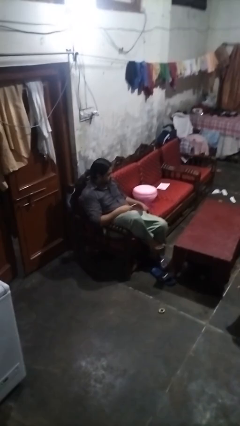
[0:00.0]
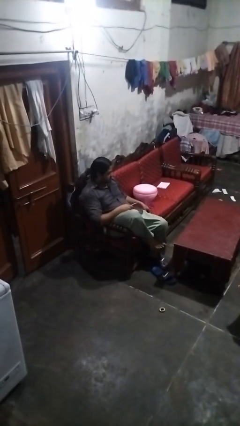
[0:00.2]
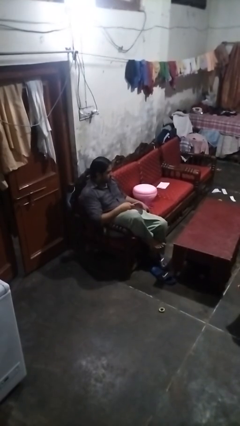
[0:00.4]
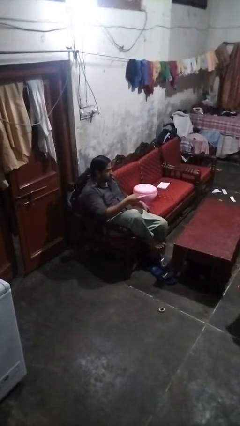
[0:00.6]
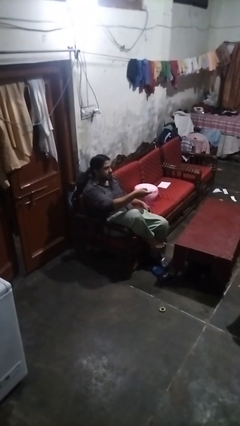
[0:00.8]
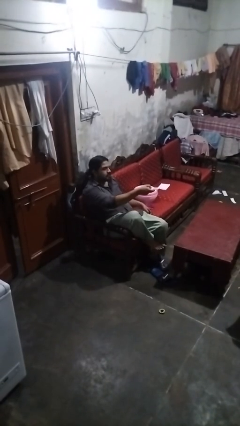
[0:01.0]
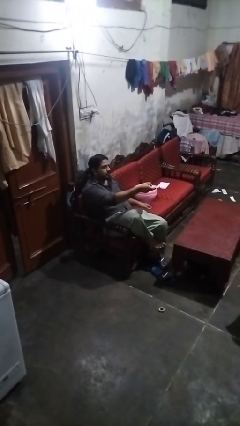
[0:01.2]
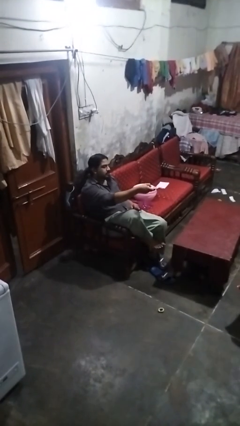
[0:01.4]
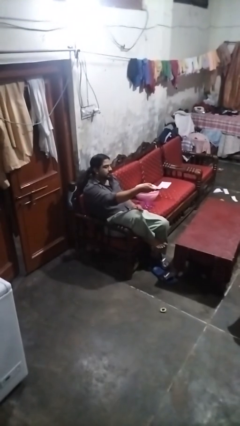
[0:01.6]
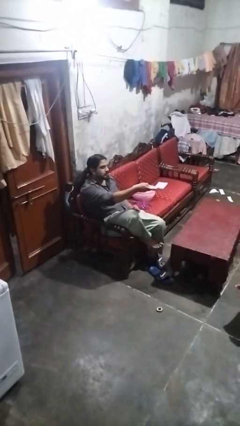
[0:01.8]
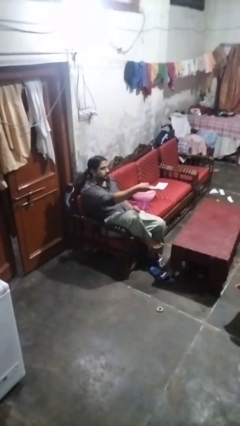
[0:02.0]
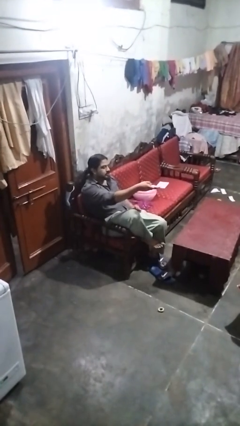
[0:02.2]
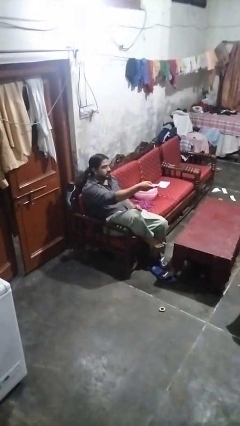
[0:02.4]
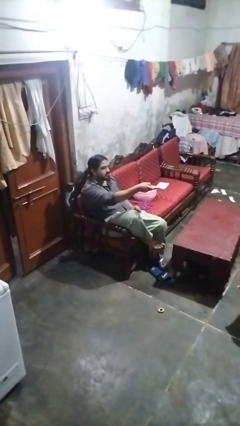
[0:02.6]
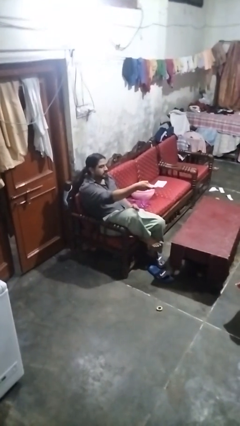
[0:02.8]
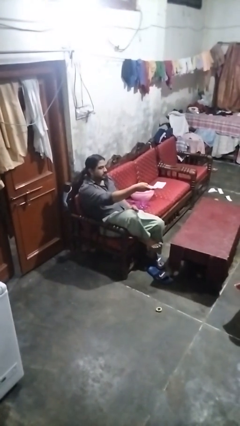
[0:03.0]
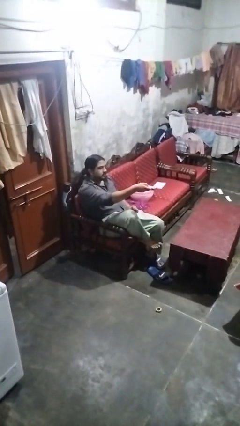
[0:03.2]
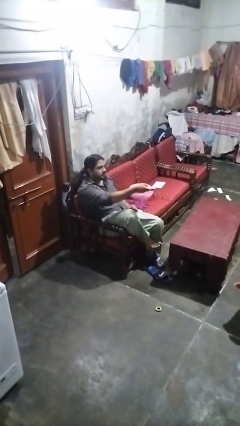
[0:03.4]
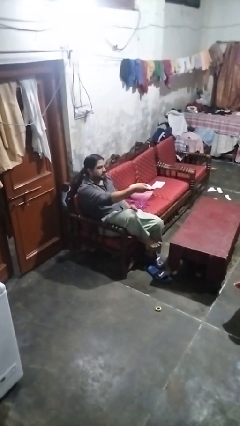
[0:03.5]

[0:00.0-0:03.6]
person uses television remote

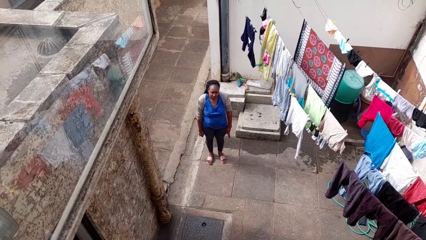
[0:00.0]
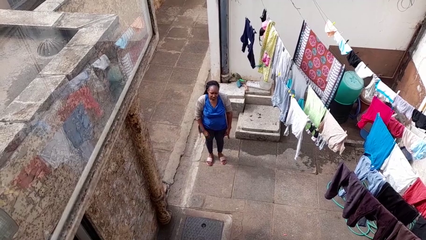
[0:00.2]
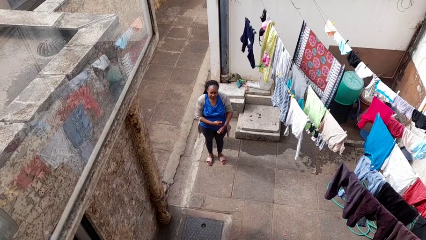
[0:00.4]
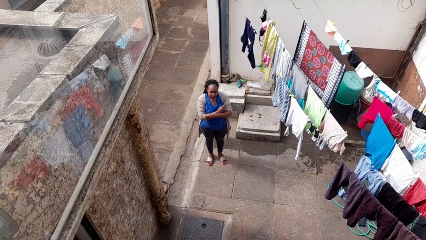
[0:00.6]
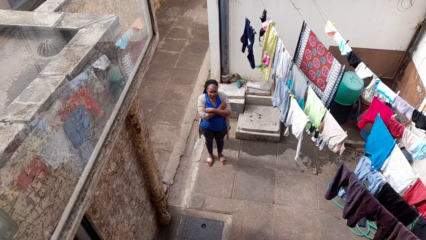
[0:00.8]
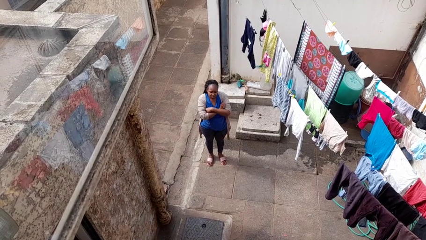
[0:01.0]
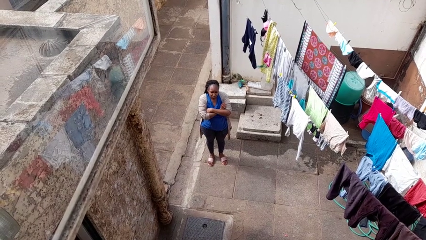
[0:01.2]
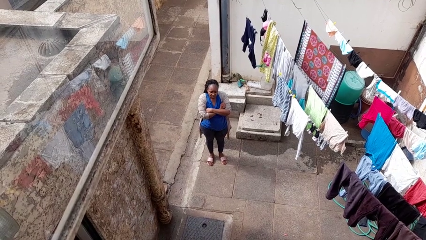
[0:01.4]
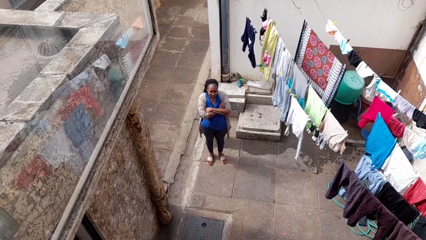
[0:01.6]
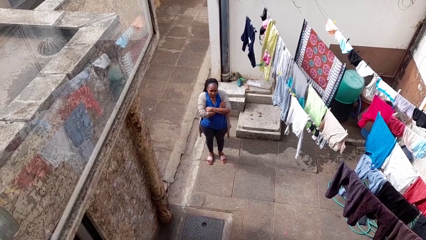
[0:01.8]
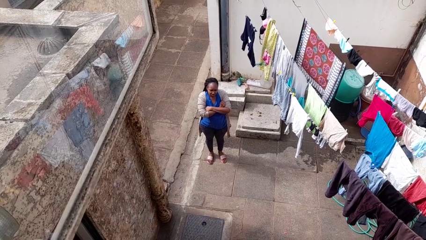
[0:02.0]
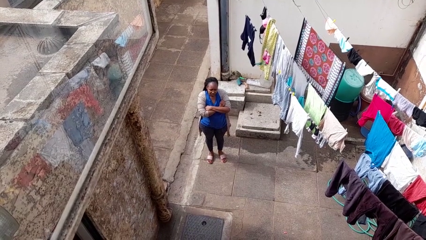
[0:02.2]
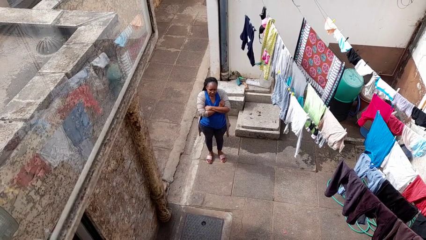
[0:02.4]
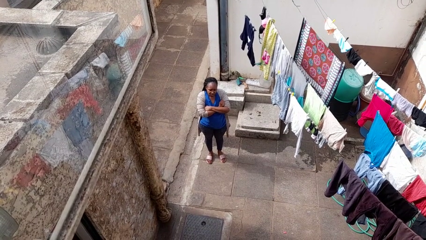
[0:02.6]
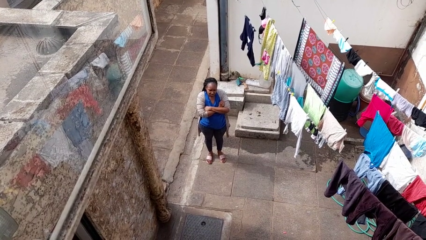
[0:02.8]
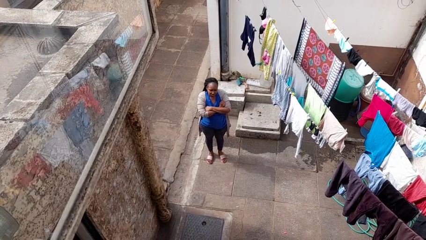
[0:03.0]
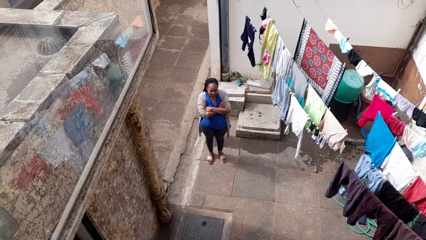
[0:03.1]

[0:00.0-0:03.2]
person gestures arms x

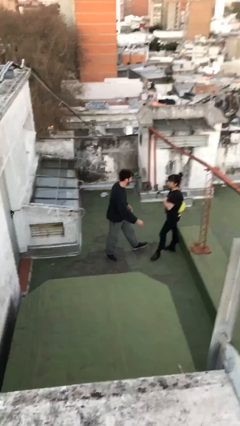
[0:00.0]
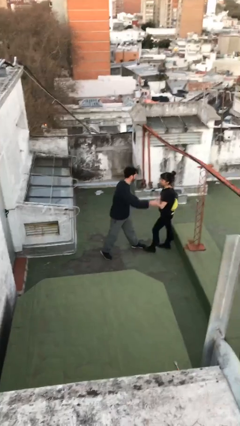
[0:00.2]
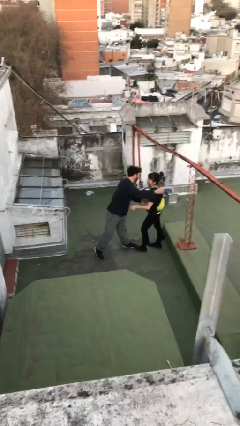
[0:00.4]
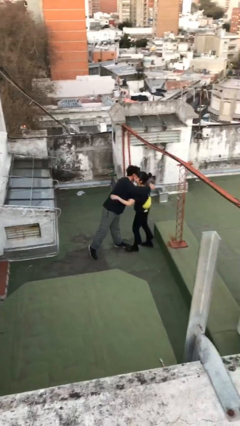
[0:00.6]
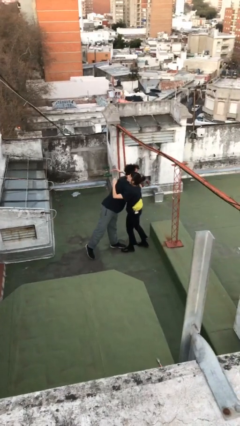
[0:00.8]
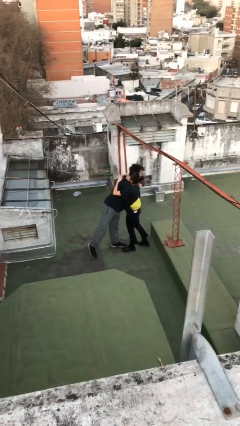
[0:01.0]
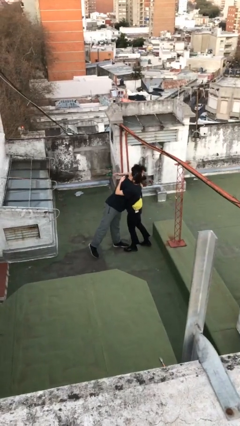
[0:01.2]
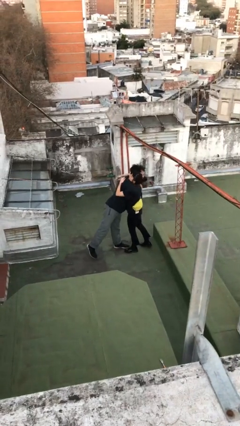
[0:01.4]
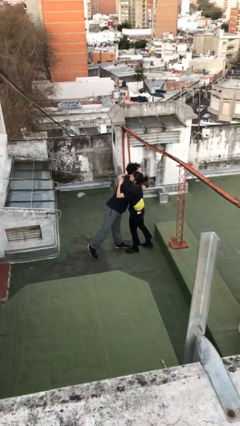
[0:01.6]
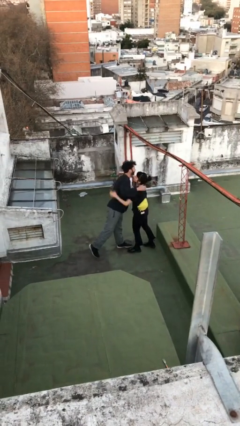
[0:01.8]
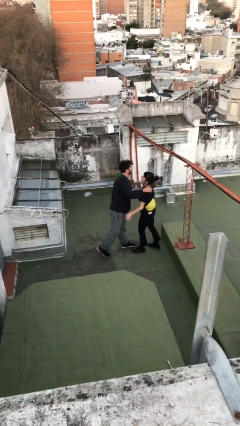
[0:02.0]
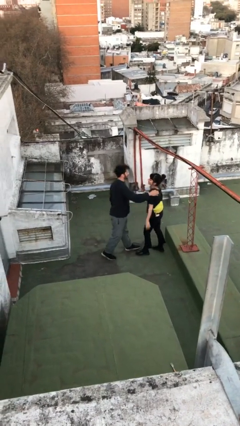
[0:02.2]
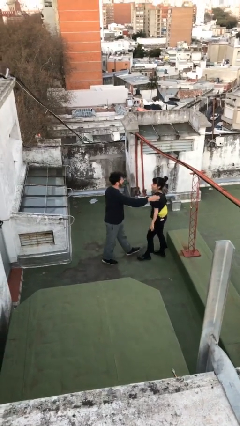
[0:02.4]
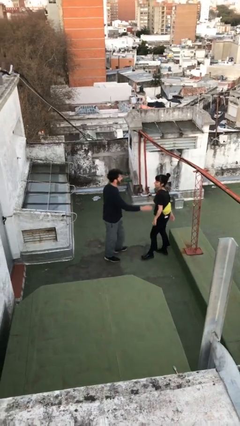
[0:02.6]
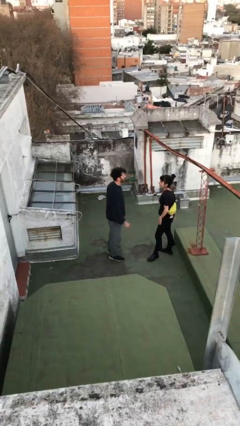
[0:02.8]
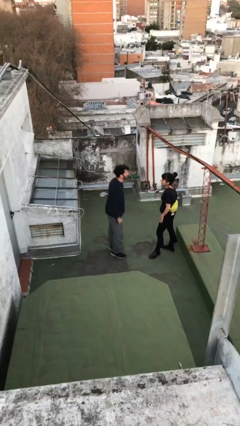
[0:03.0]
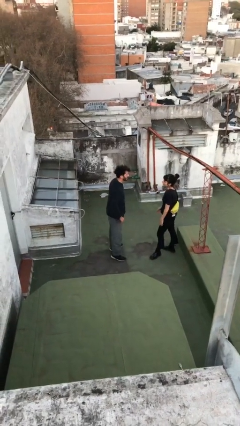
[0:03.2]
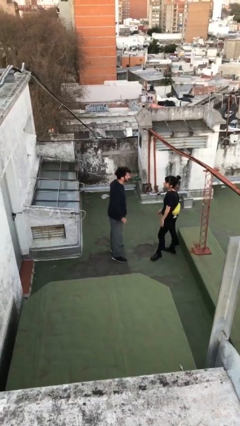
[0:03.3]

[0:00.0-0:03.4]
person embraces person

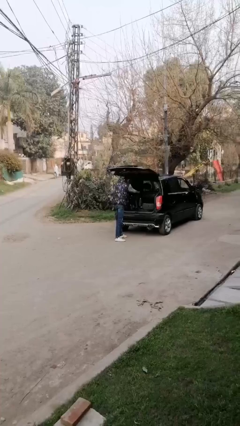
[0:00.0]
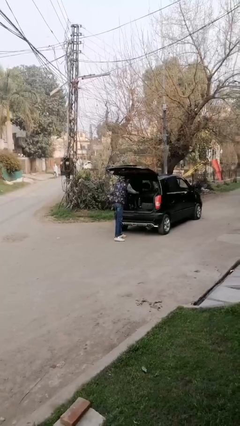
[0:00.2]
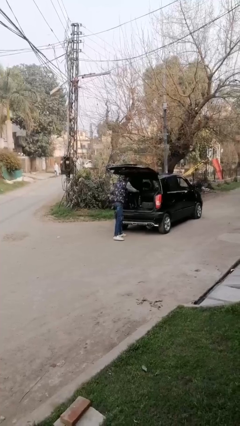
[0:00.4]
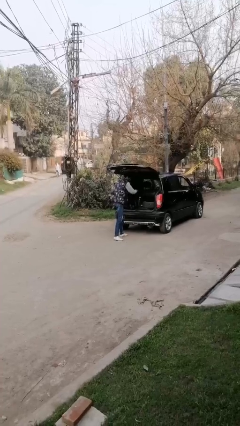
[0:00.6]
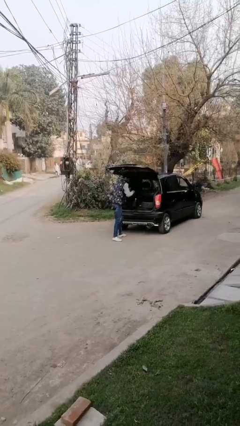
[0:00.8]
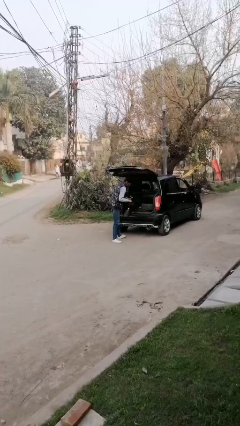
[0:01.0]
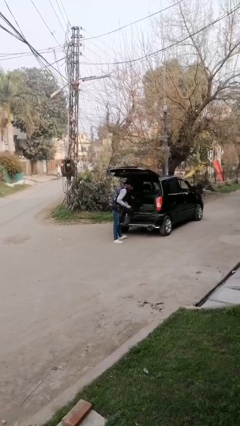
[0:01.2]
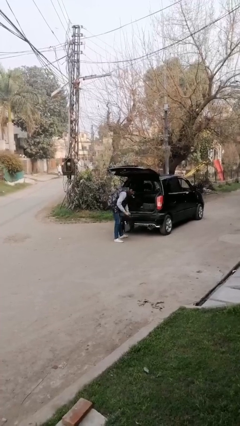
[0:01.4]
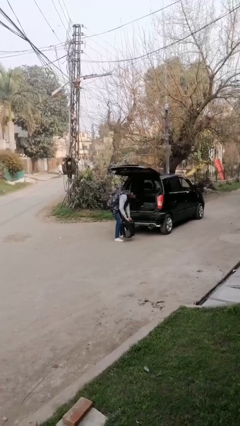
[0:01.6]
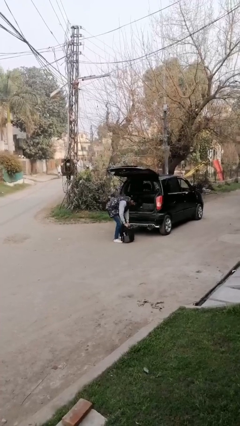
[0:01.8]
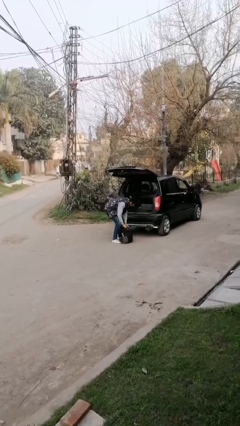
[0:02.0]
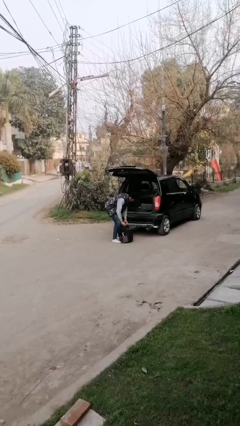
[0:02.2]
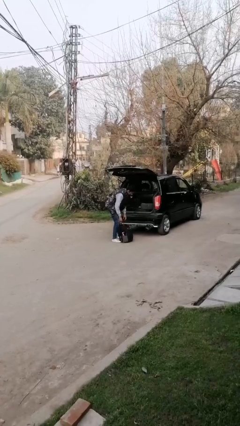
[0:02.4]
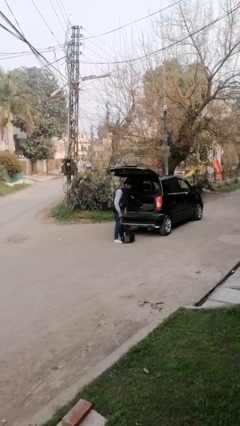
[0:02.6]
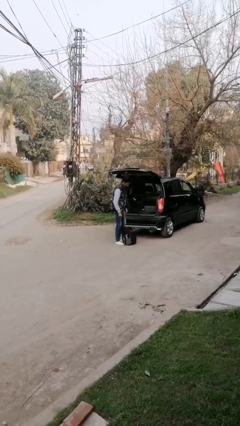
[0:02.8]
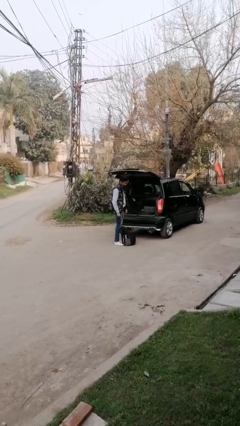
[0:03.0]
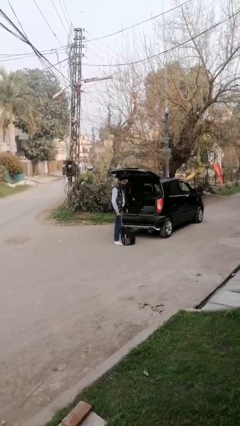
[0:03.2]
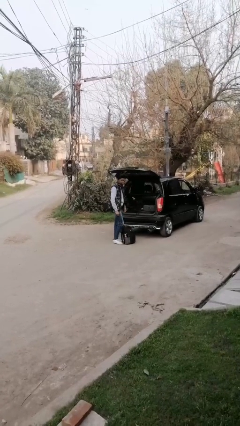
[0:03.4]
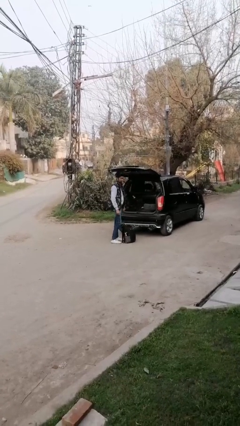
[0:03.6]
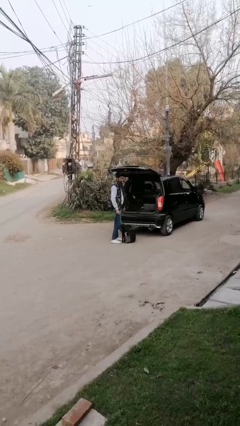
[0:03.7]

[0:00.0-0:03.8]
person unloads car

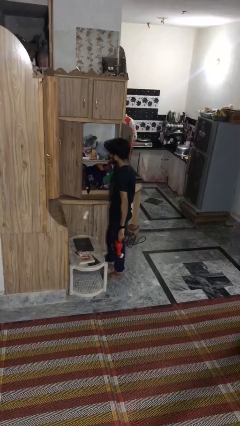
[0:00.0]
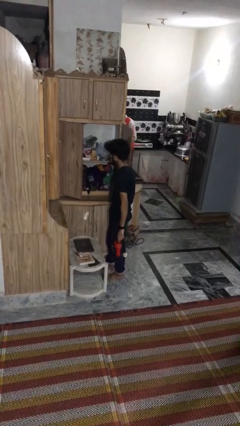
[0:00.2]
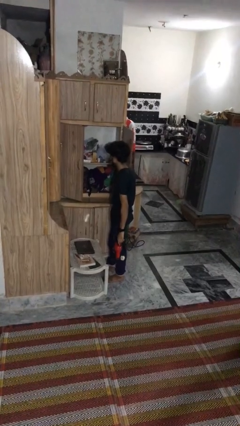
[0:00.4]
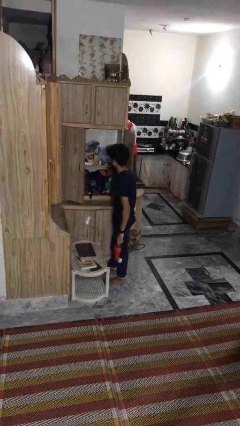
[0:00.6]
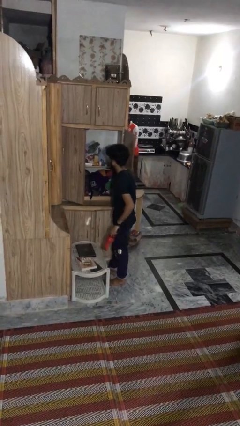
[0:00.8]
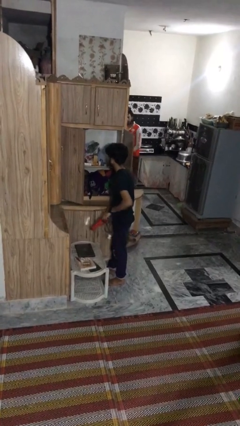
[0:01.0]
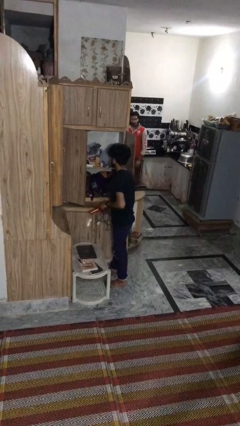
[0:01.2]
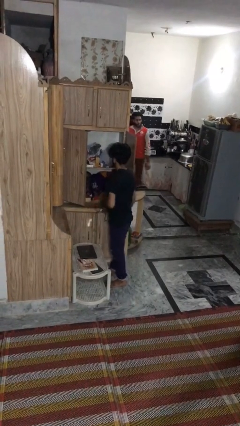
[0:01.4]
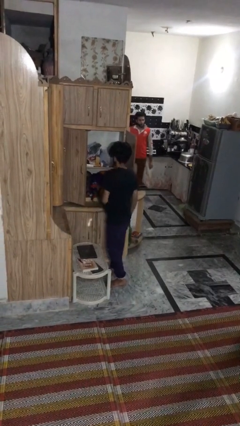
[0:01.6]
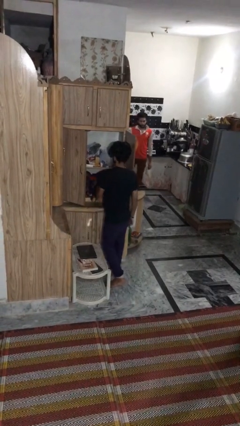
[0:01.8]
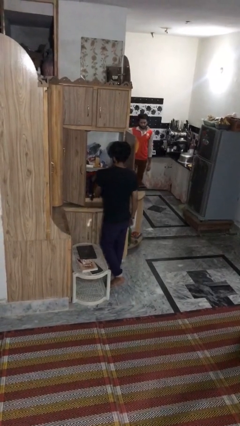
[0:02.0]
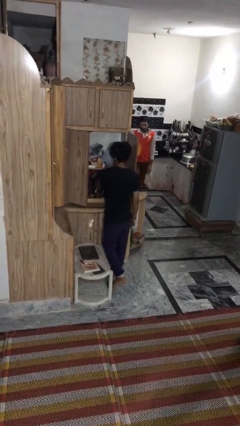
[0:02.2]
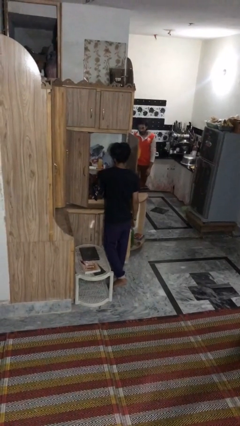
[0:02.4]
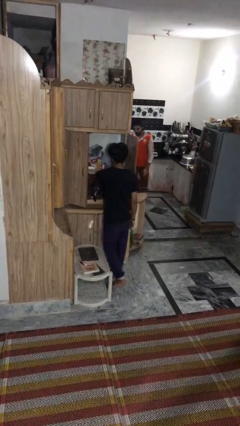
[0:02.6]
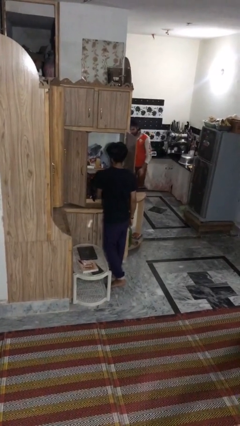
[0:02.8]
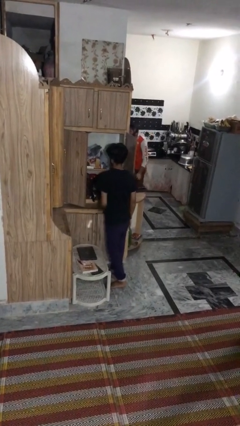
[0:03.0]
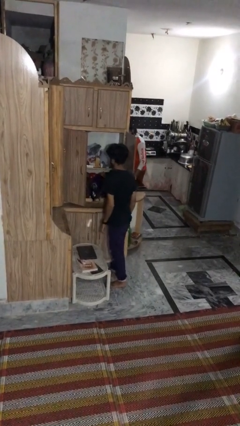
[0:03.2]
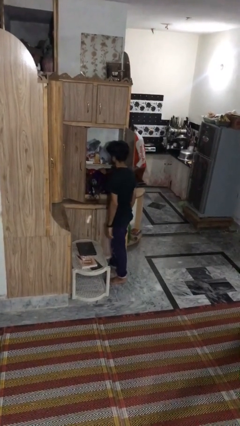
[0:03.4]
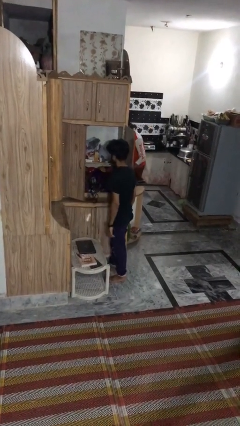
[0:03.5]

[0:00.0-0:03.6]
person puts down object into cabinet
